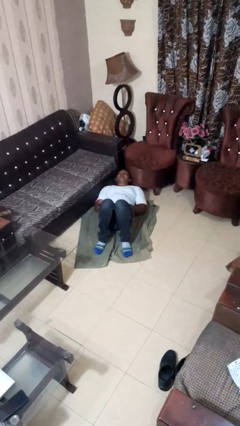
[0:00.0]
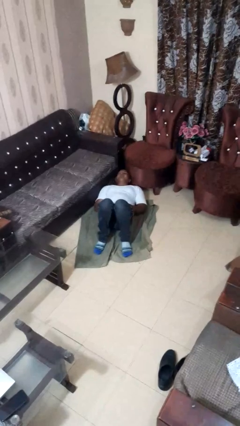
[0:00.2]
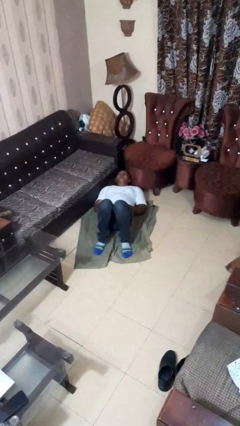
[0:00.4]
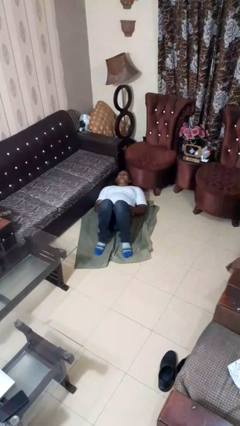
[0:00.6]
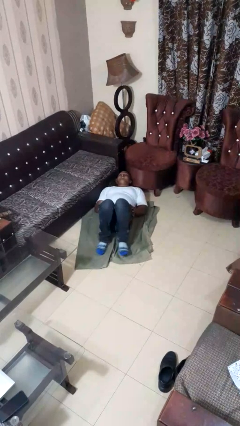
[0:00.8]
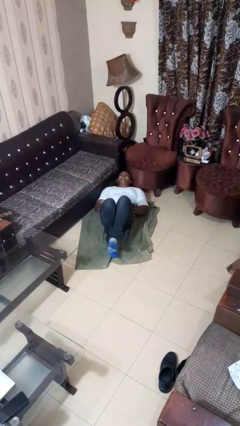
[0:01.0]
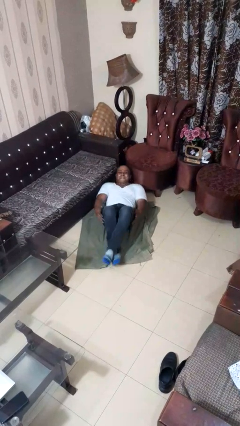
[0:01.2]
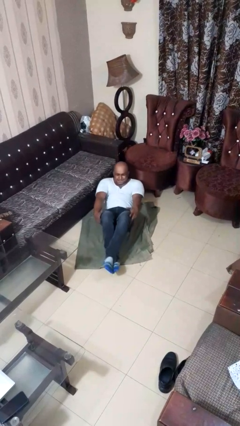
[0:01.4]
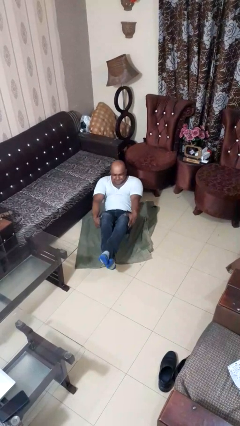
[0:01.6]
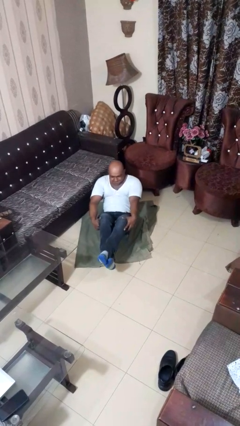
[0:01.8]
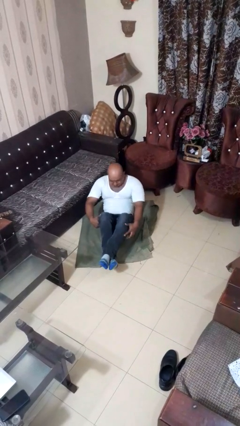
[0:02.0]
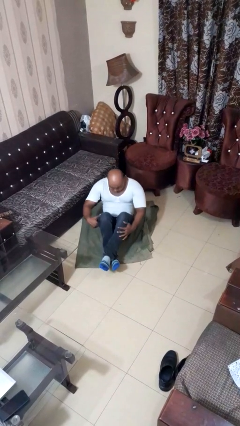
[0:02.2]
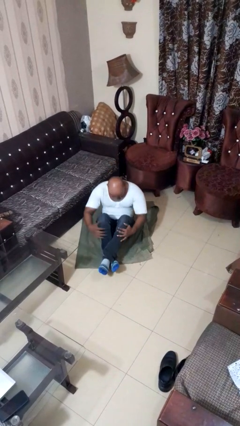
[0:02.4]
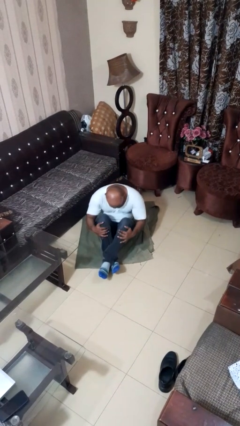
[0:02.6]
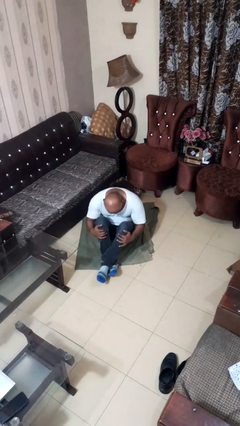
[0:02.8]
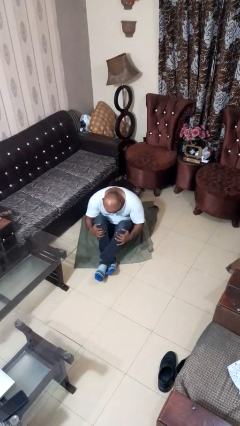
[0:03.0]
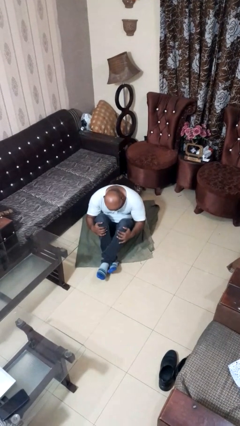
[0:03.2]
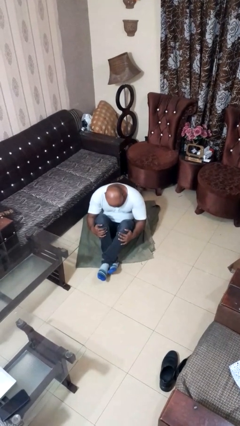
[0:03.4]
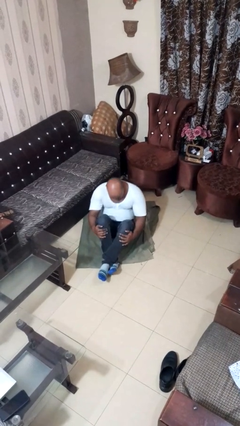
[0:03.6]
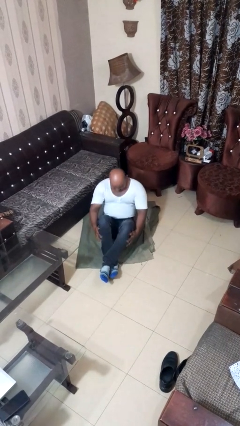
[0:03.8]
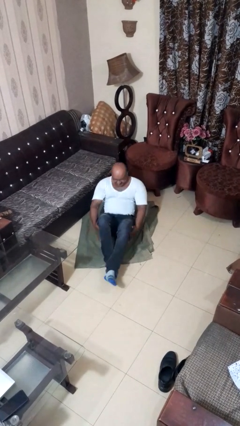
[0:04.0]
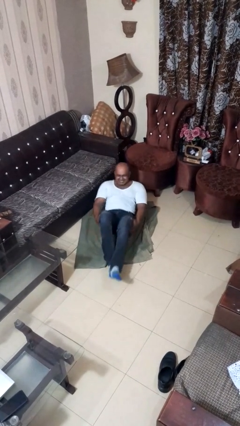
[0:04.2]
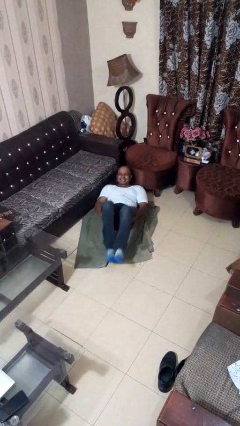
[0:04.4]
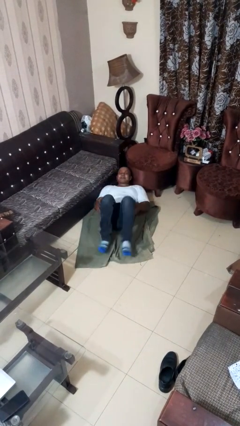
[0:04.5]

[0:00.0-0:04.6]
person exercises with situp

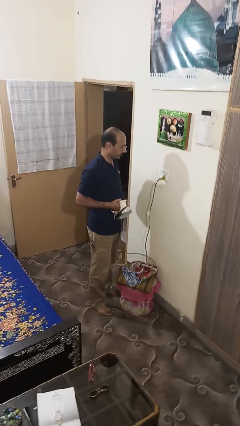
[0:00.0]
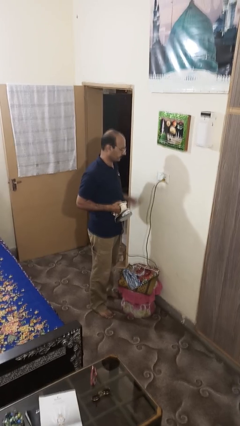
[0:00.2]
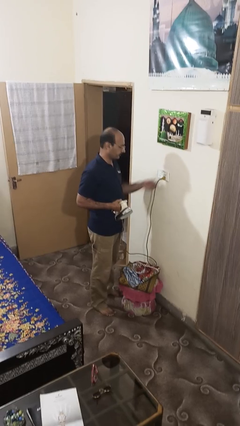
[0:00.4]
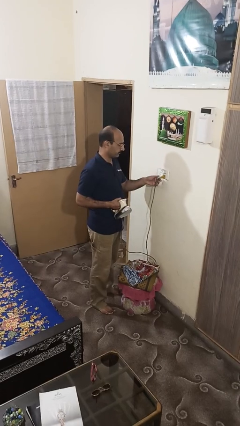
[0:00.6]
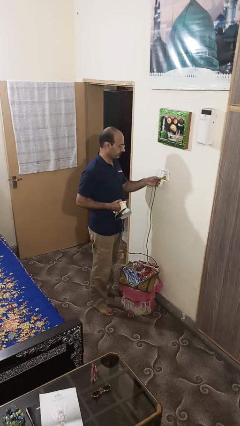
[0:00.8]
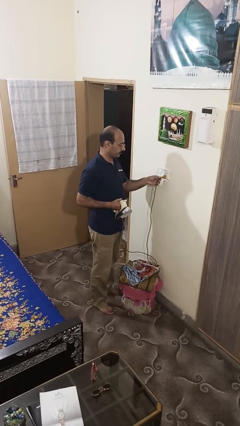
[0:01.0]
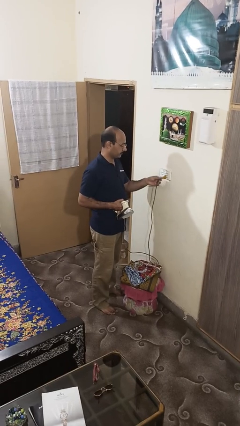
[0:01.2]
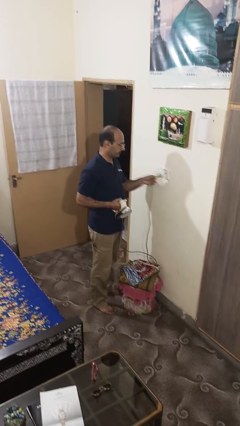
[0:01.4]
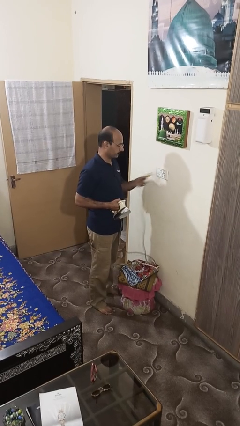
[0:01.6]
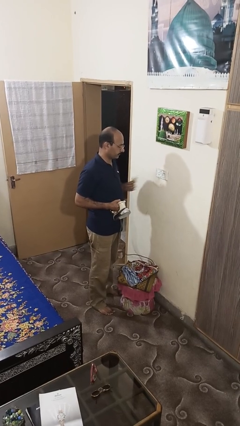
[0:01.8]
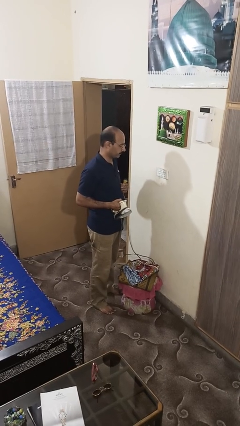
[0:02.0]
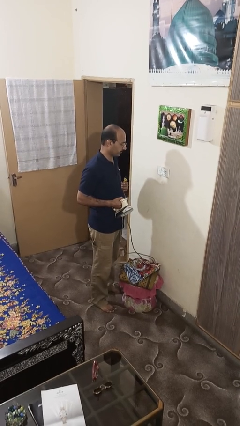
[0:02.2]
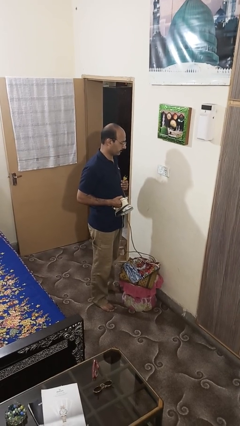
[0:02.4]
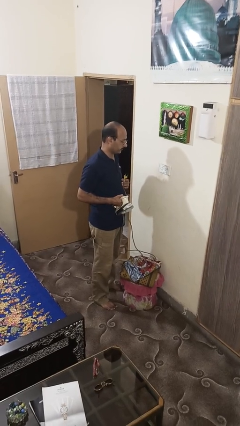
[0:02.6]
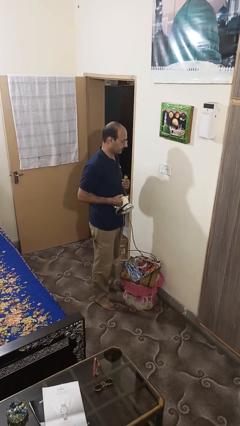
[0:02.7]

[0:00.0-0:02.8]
person unplugs from electrical socket

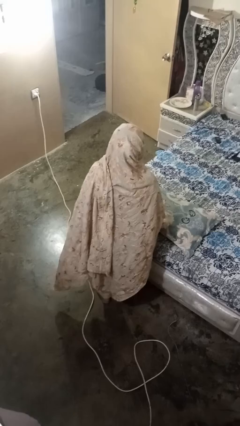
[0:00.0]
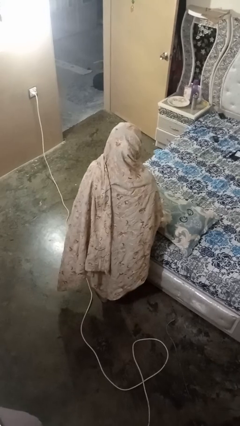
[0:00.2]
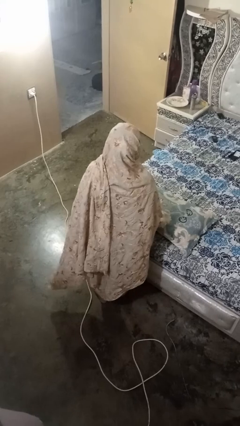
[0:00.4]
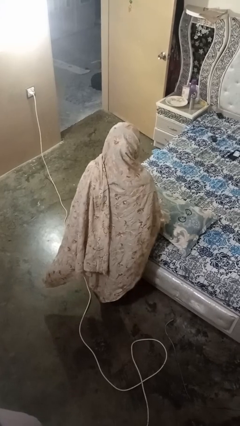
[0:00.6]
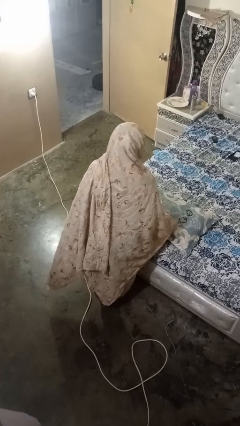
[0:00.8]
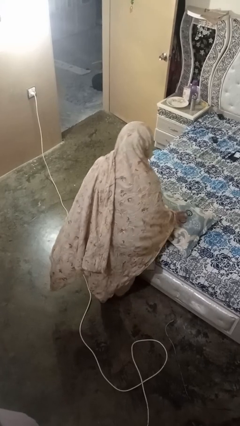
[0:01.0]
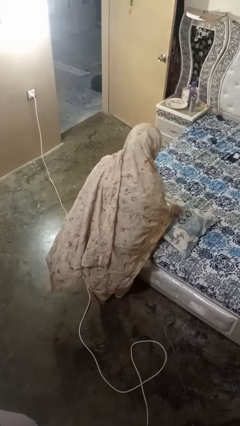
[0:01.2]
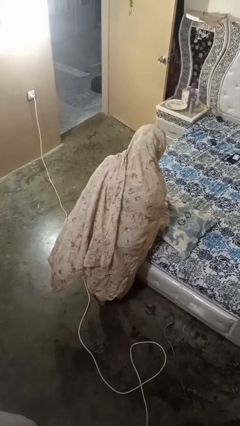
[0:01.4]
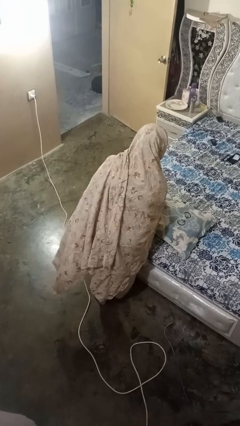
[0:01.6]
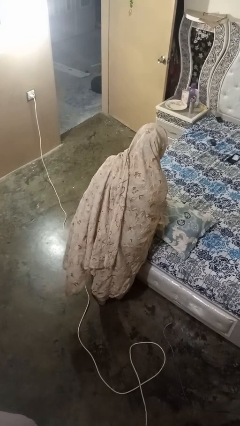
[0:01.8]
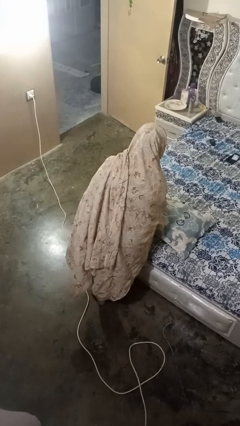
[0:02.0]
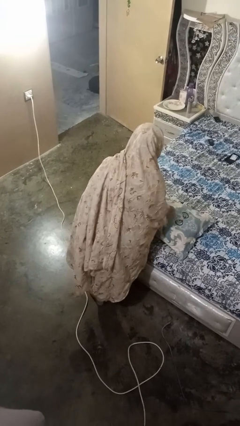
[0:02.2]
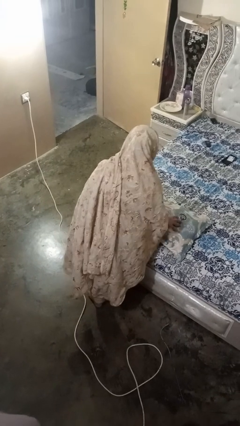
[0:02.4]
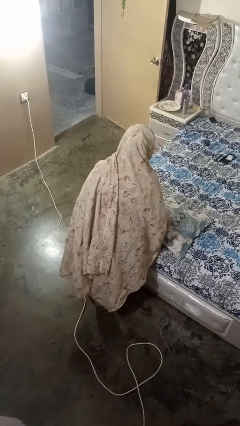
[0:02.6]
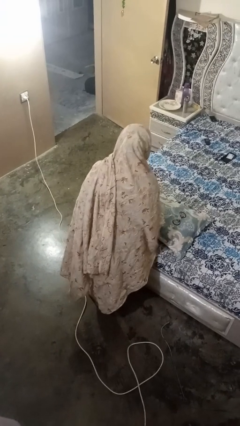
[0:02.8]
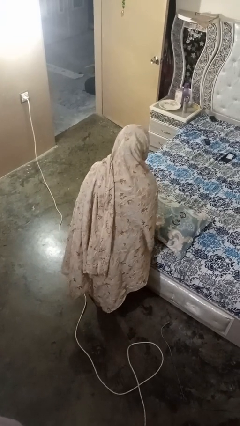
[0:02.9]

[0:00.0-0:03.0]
person taps object with finger

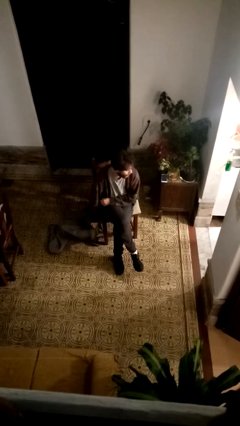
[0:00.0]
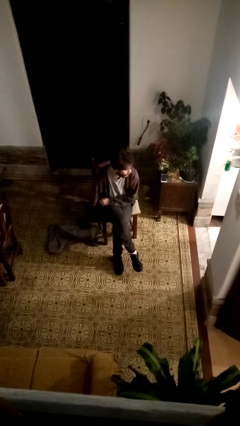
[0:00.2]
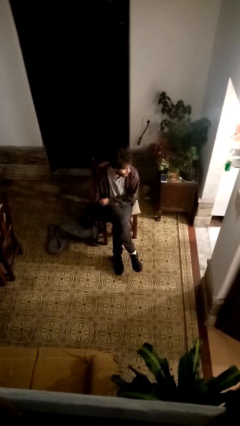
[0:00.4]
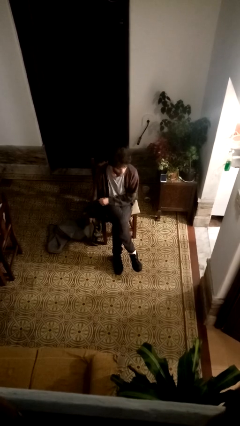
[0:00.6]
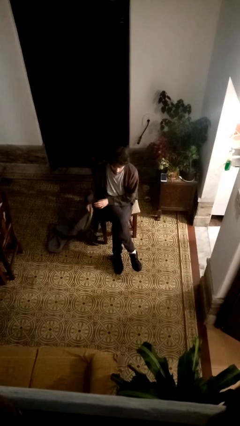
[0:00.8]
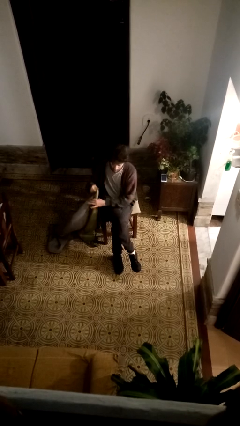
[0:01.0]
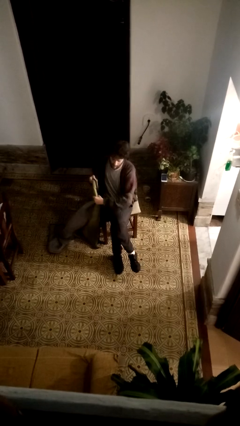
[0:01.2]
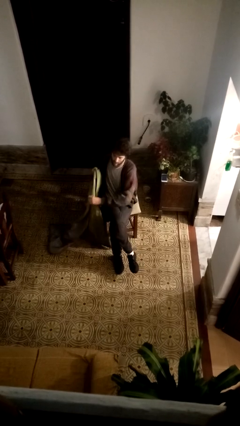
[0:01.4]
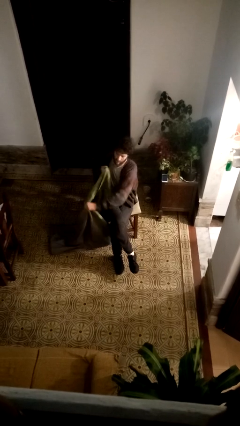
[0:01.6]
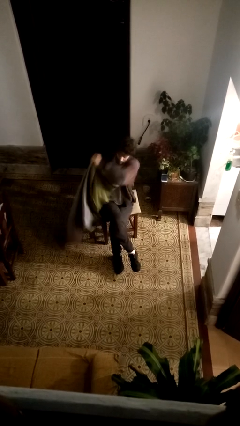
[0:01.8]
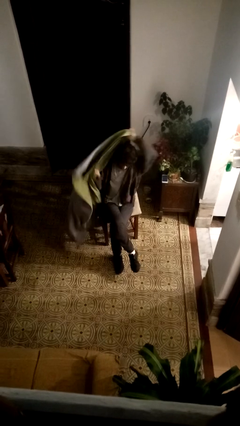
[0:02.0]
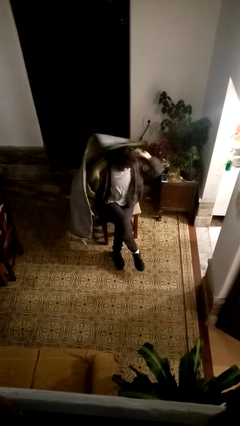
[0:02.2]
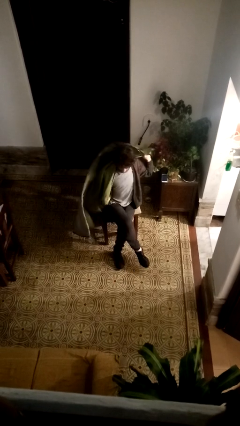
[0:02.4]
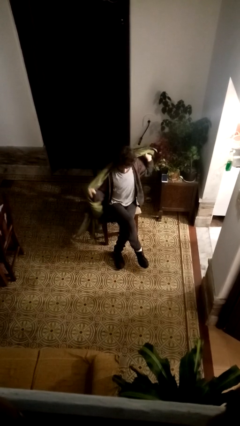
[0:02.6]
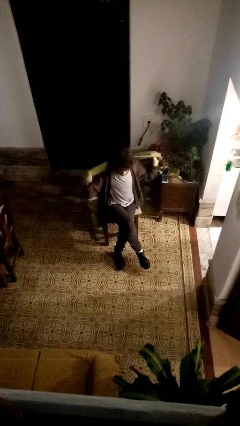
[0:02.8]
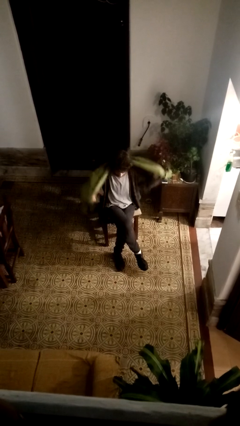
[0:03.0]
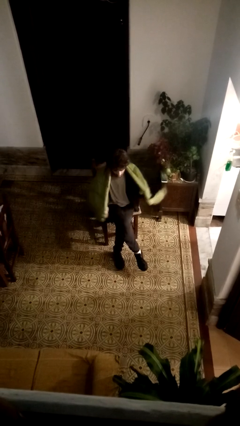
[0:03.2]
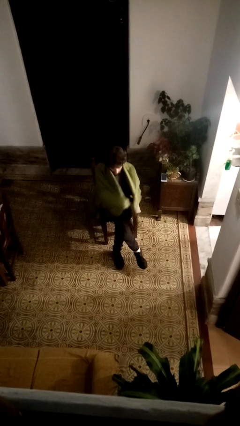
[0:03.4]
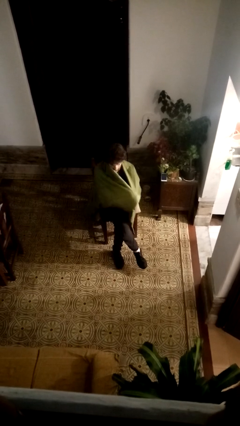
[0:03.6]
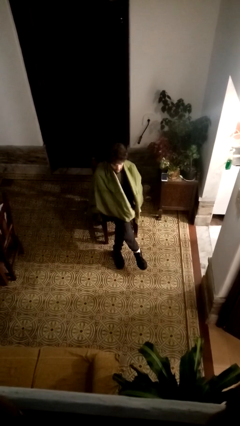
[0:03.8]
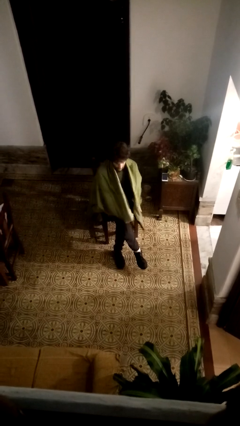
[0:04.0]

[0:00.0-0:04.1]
person covers with blanket

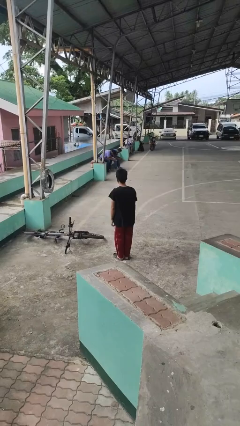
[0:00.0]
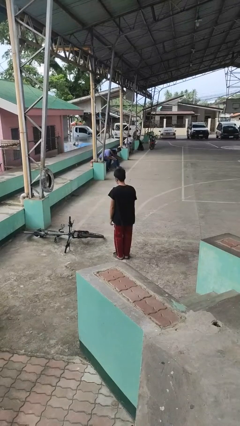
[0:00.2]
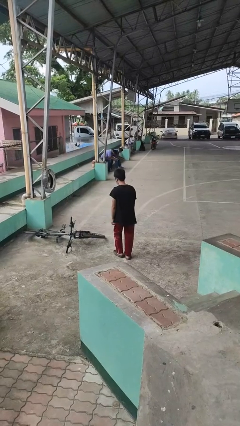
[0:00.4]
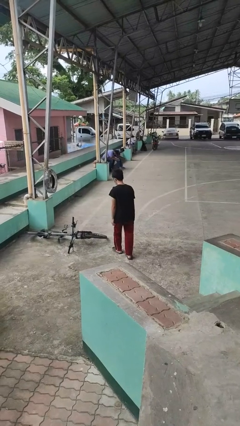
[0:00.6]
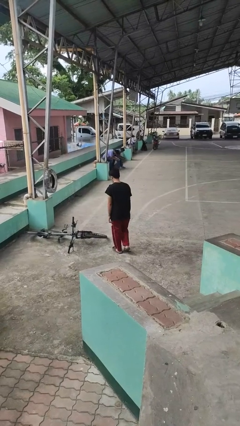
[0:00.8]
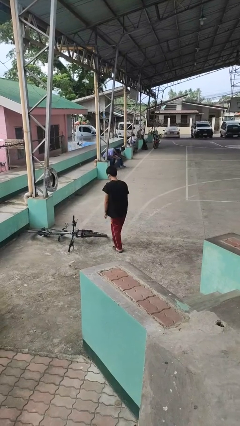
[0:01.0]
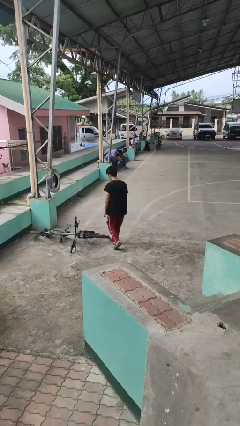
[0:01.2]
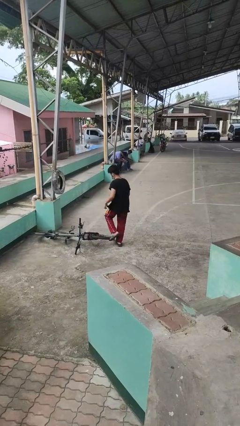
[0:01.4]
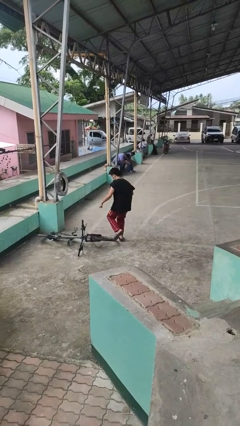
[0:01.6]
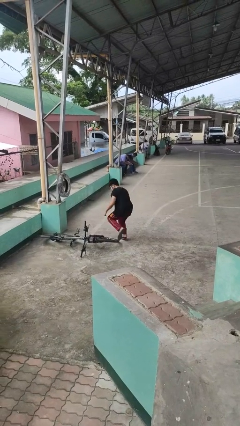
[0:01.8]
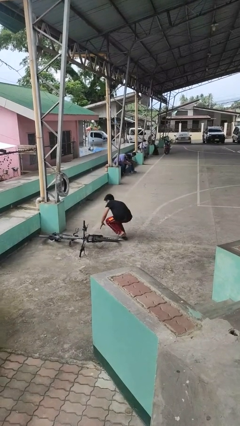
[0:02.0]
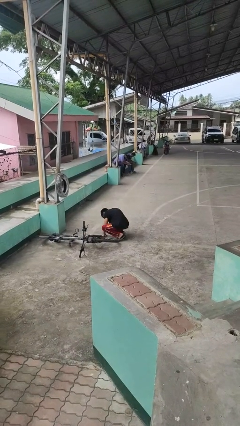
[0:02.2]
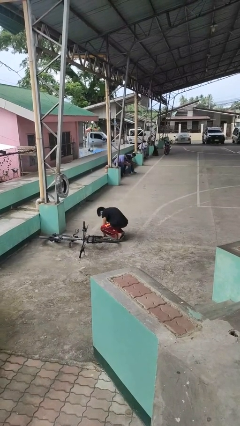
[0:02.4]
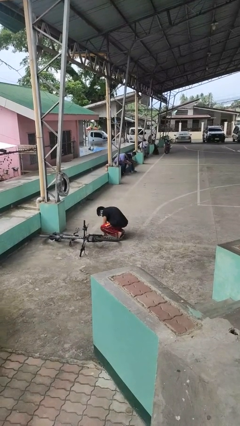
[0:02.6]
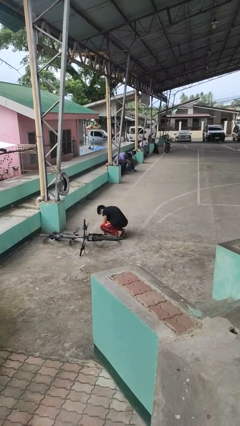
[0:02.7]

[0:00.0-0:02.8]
person trips on object on floor
